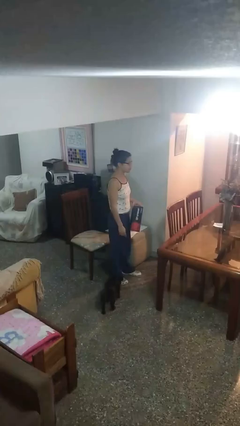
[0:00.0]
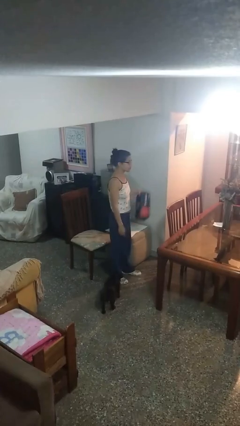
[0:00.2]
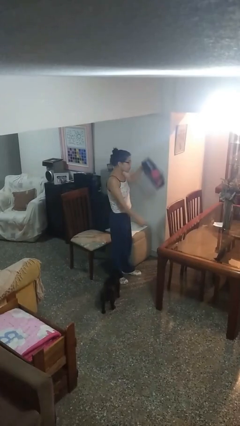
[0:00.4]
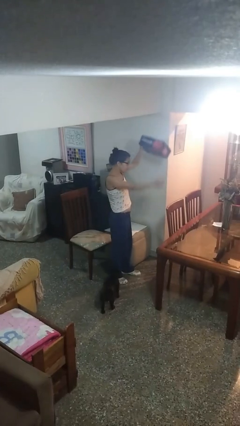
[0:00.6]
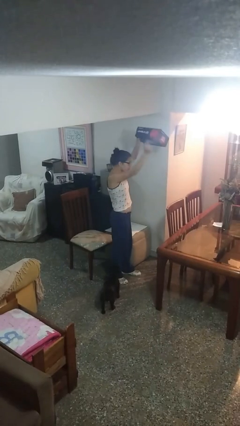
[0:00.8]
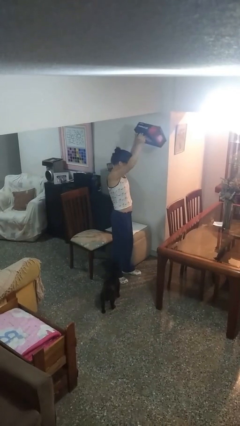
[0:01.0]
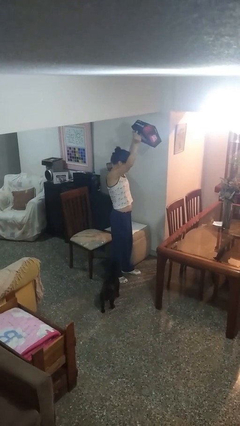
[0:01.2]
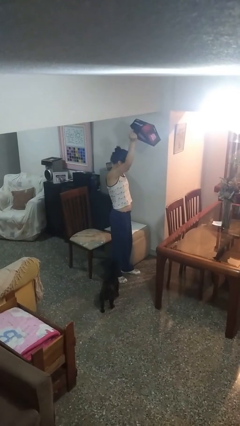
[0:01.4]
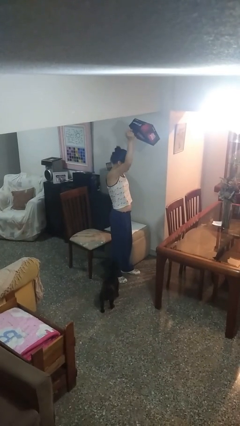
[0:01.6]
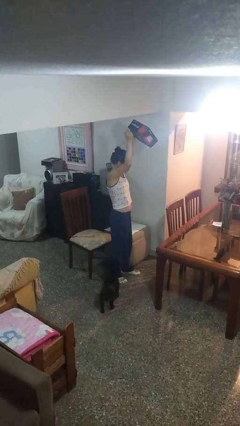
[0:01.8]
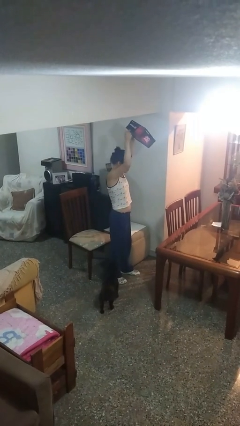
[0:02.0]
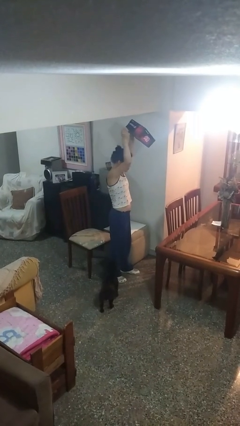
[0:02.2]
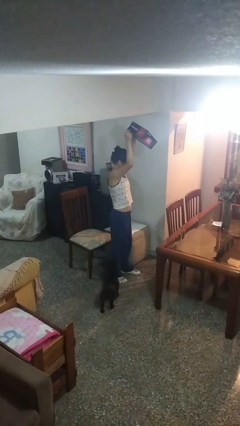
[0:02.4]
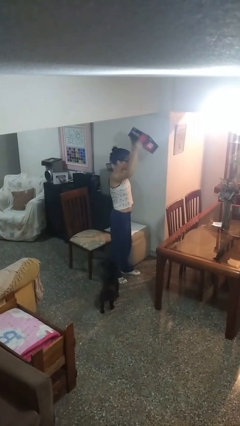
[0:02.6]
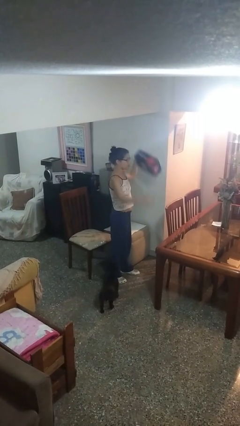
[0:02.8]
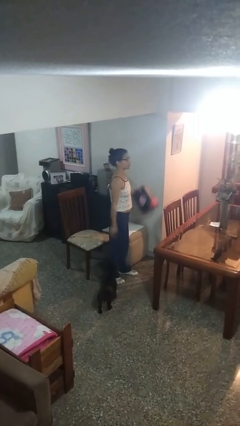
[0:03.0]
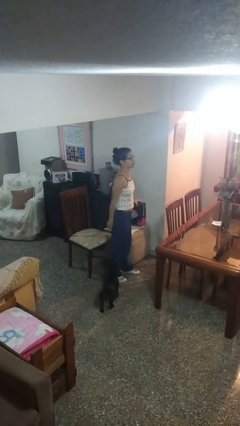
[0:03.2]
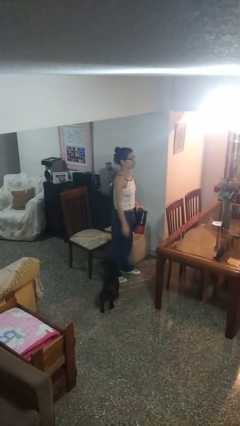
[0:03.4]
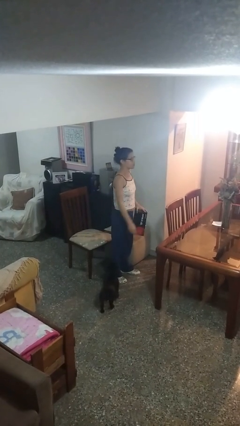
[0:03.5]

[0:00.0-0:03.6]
person holds object above head

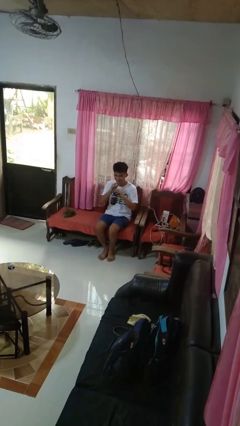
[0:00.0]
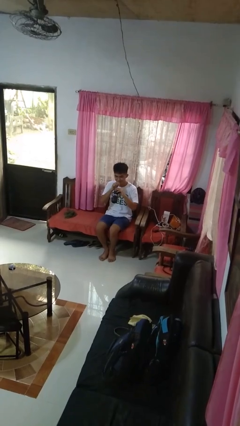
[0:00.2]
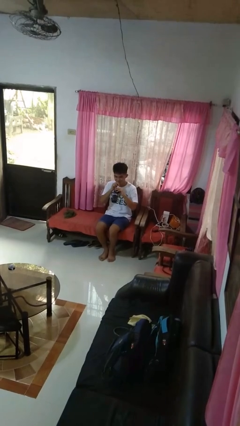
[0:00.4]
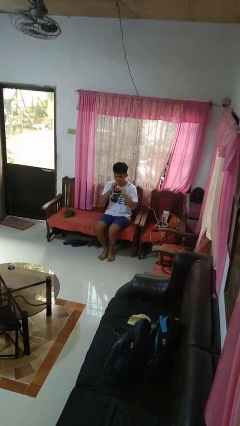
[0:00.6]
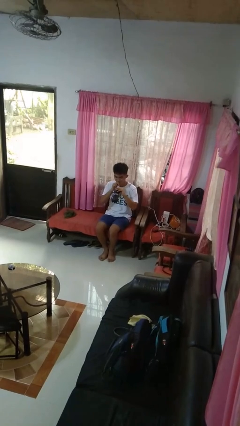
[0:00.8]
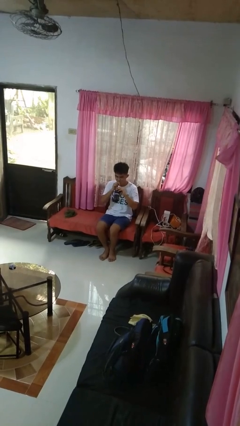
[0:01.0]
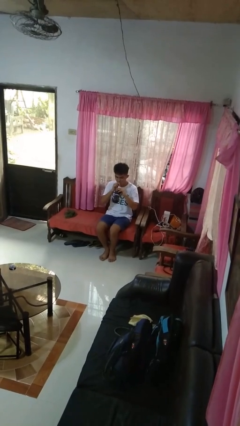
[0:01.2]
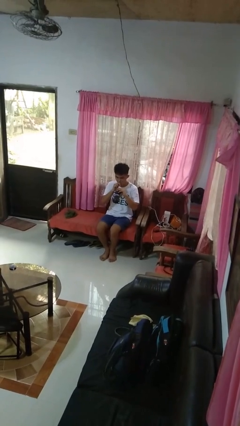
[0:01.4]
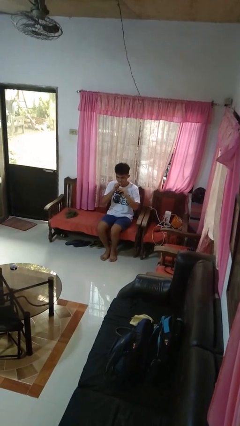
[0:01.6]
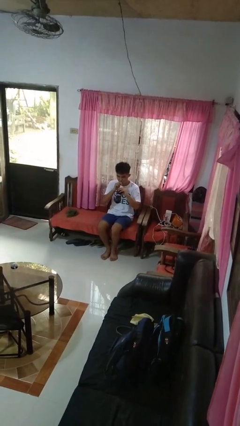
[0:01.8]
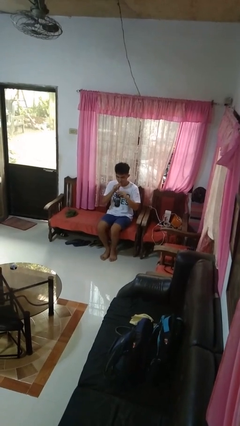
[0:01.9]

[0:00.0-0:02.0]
person drinks from straw

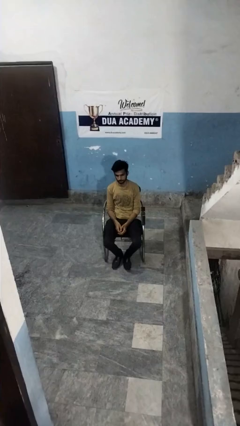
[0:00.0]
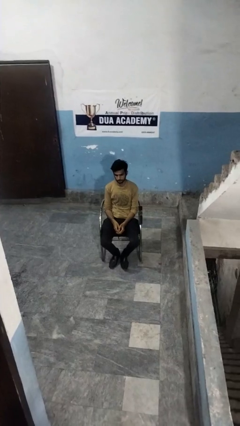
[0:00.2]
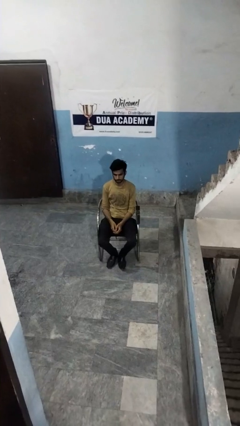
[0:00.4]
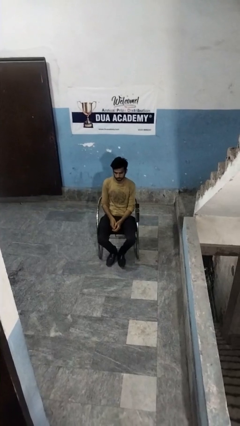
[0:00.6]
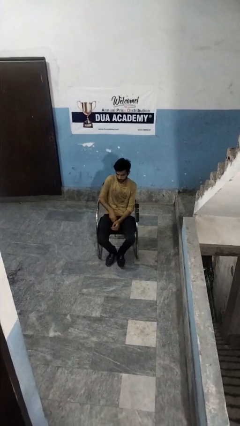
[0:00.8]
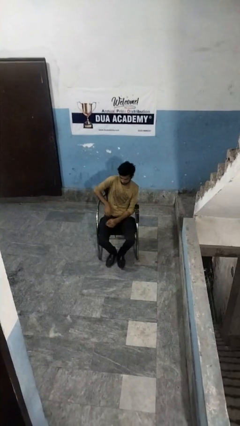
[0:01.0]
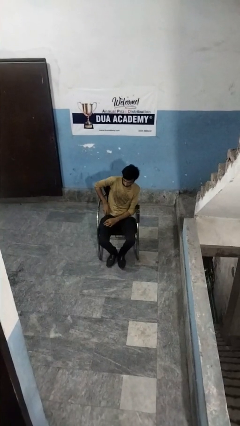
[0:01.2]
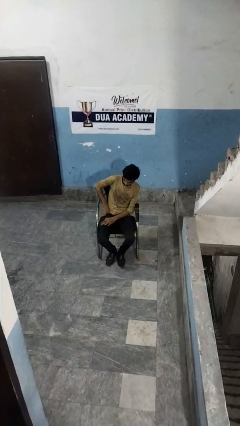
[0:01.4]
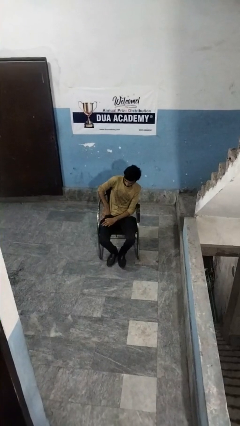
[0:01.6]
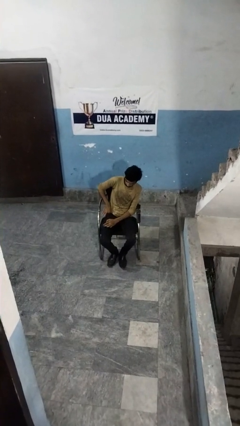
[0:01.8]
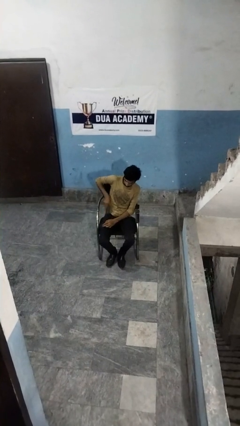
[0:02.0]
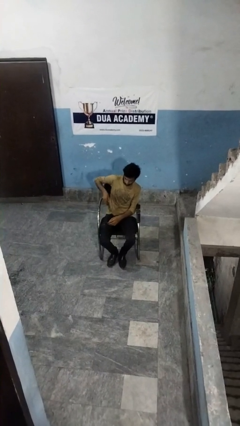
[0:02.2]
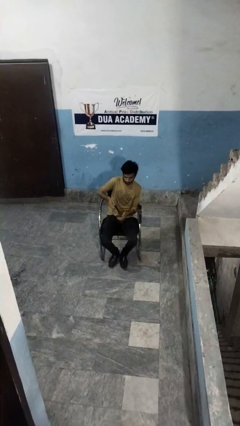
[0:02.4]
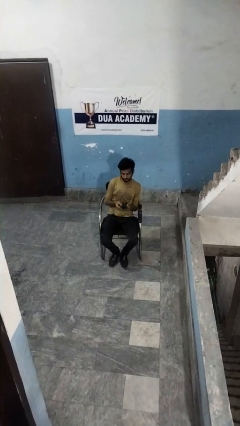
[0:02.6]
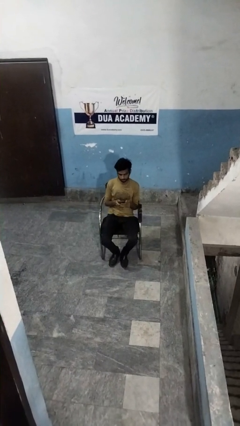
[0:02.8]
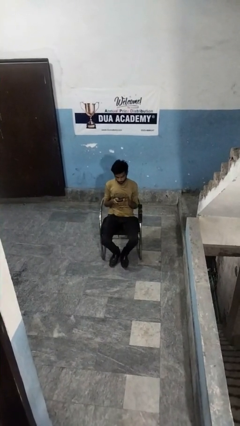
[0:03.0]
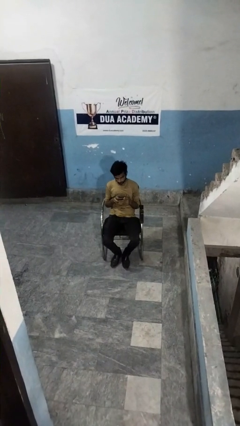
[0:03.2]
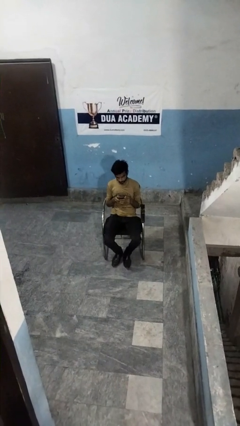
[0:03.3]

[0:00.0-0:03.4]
person takes phone from pocket

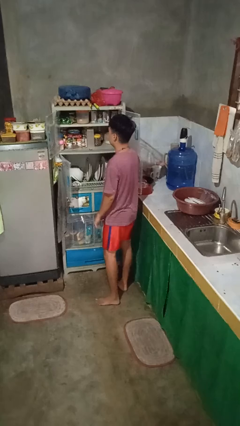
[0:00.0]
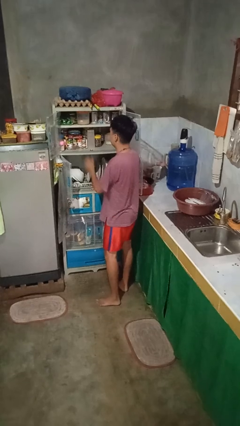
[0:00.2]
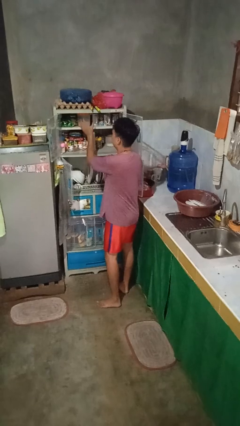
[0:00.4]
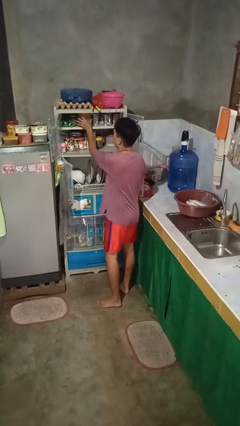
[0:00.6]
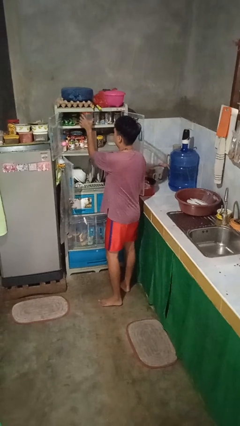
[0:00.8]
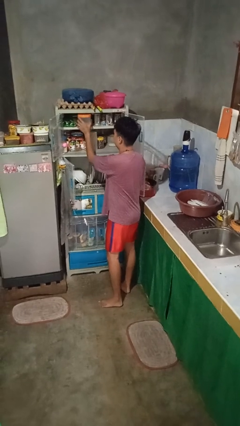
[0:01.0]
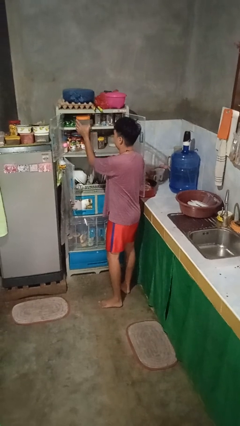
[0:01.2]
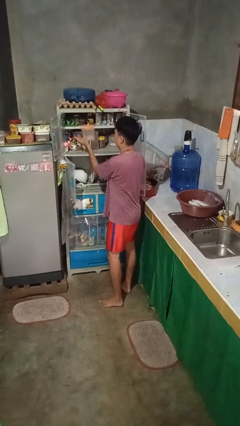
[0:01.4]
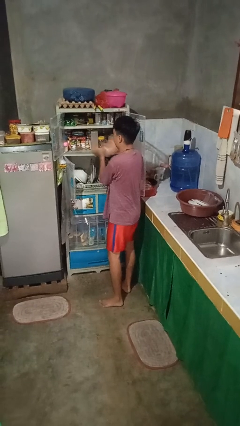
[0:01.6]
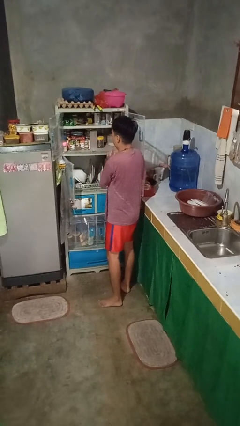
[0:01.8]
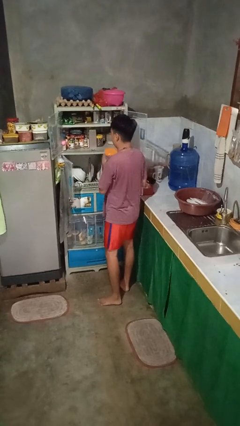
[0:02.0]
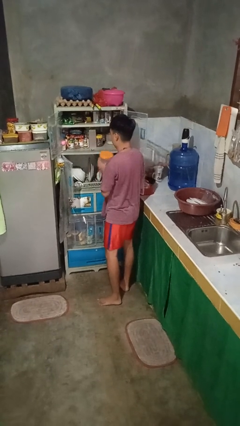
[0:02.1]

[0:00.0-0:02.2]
person takes object from cabinet

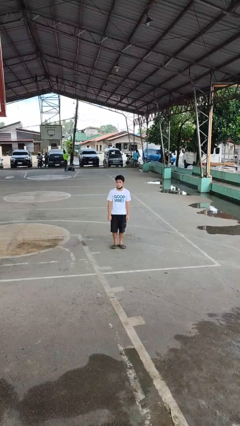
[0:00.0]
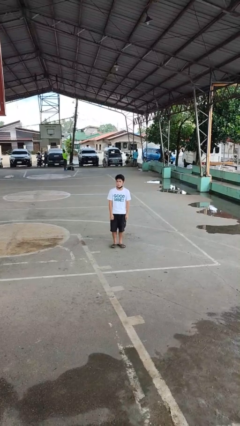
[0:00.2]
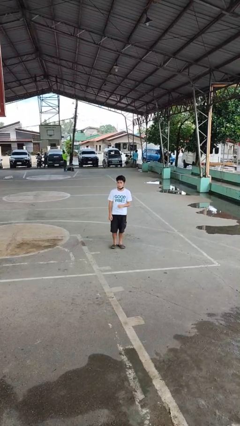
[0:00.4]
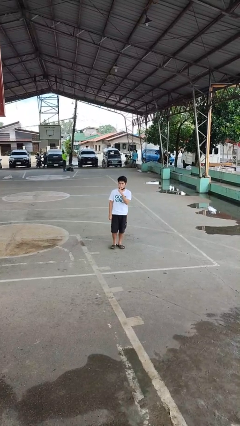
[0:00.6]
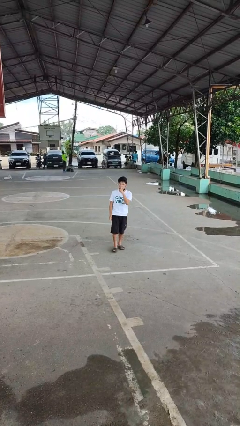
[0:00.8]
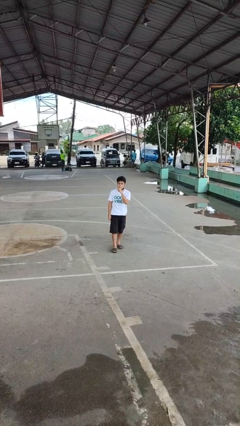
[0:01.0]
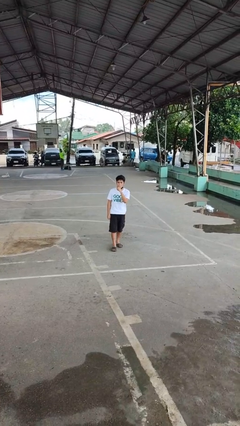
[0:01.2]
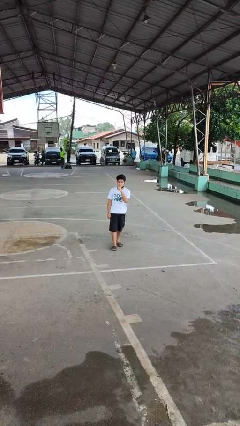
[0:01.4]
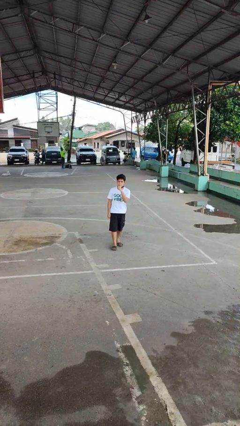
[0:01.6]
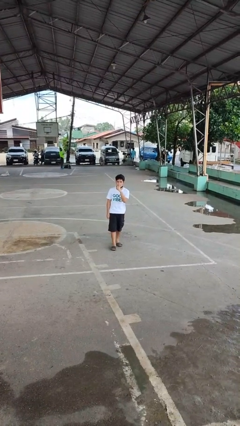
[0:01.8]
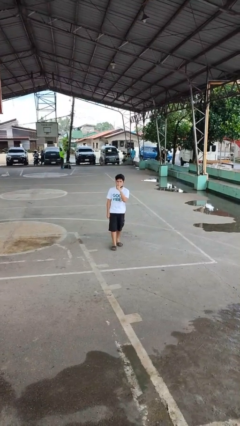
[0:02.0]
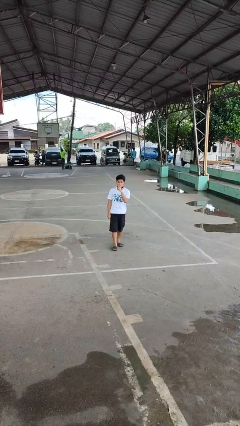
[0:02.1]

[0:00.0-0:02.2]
person gestures be quiet

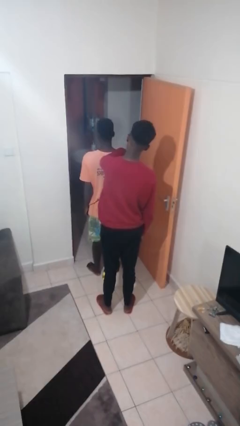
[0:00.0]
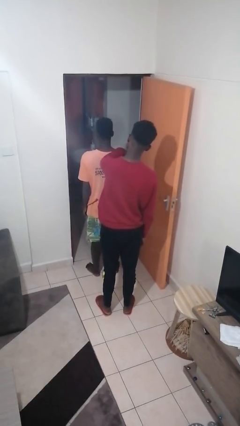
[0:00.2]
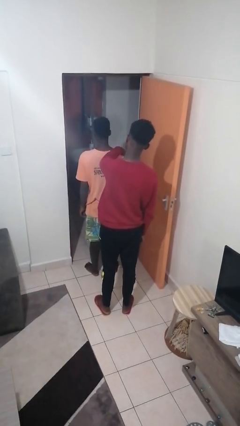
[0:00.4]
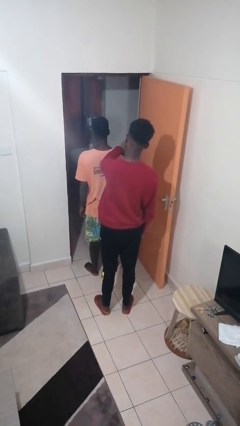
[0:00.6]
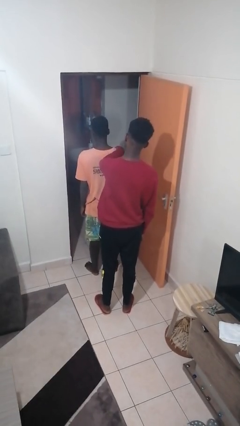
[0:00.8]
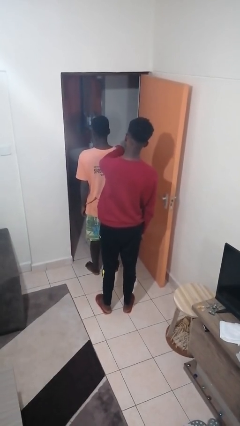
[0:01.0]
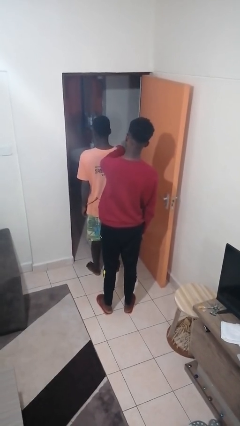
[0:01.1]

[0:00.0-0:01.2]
person grabs person by shoulder

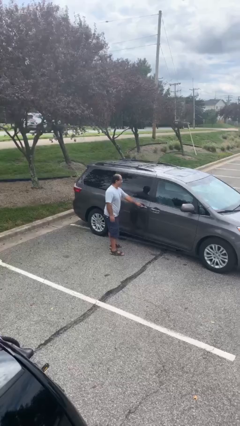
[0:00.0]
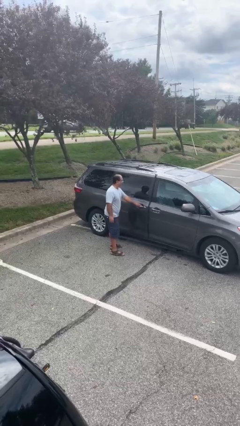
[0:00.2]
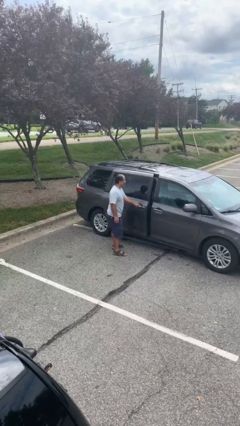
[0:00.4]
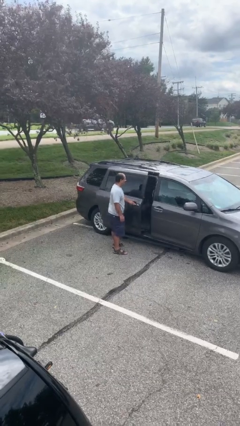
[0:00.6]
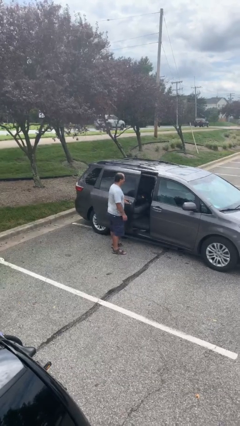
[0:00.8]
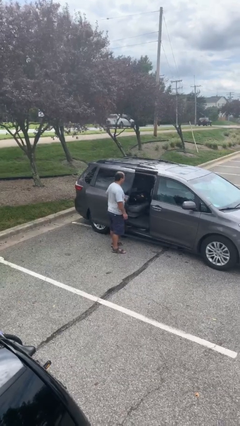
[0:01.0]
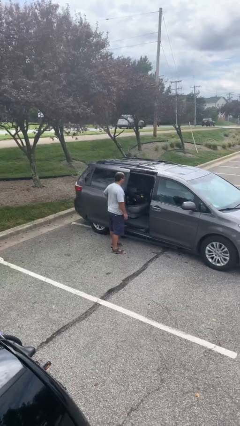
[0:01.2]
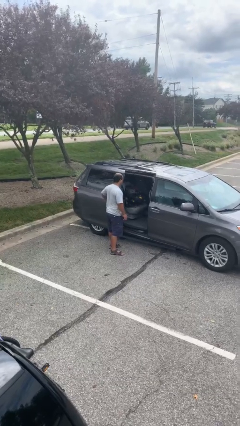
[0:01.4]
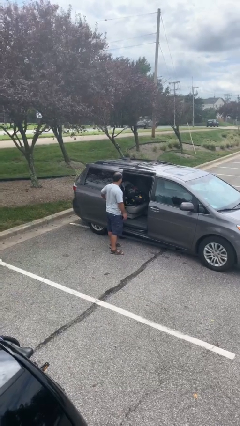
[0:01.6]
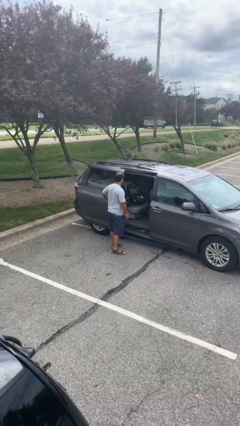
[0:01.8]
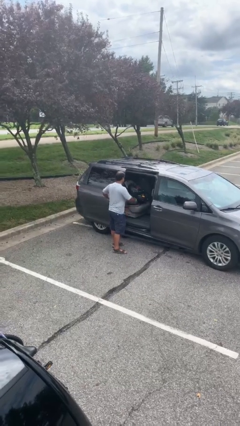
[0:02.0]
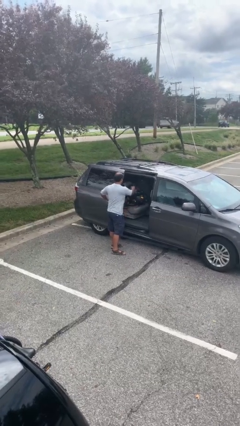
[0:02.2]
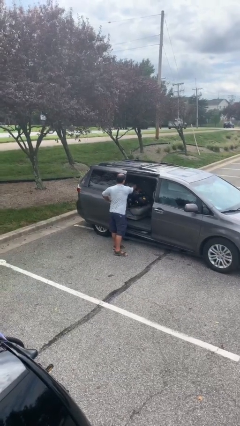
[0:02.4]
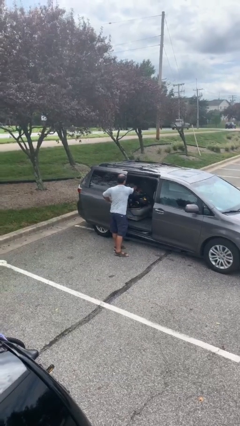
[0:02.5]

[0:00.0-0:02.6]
person opens car door
